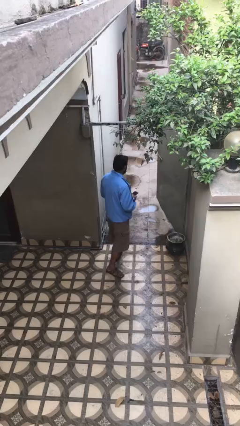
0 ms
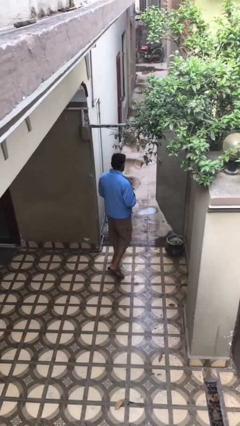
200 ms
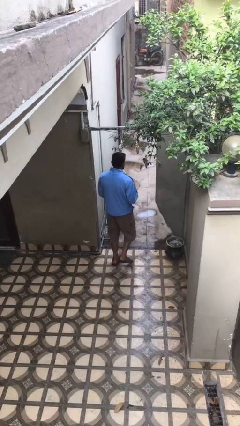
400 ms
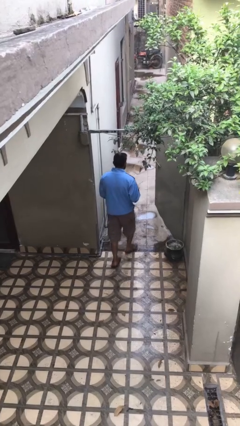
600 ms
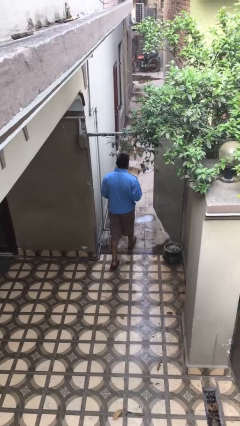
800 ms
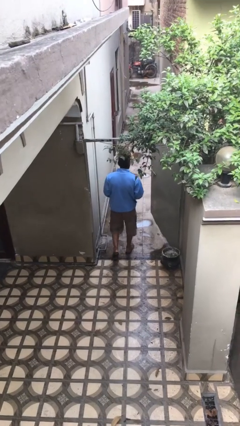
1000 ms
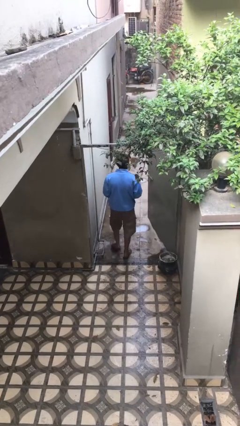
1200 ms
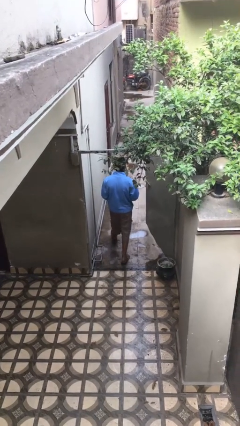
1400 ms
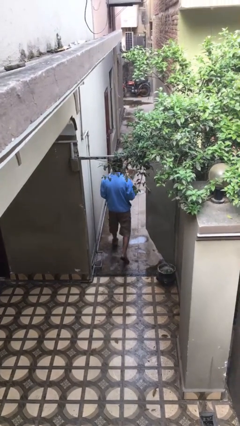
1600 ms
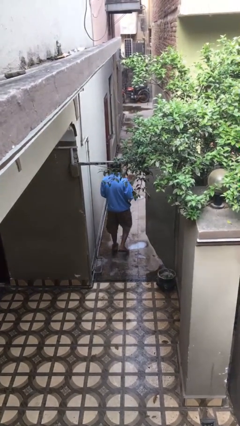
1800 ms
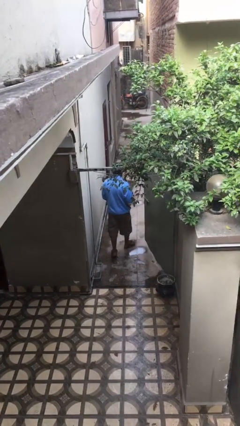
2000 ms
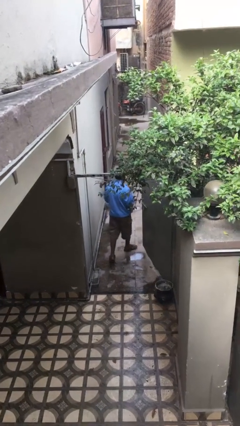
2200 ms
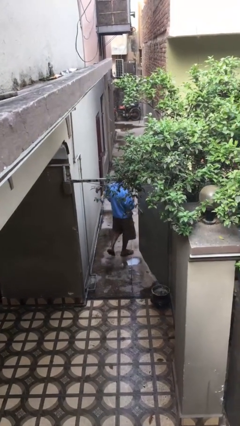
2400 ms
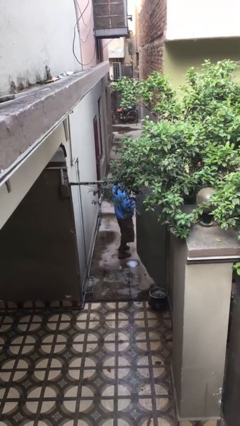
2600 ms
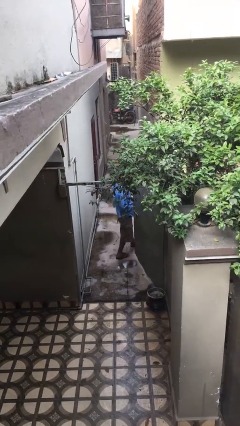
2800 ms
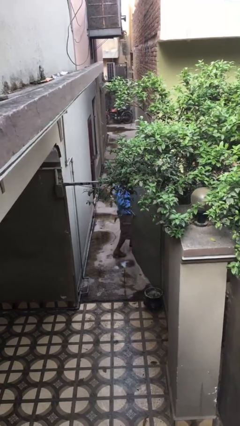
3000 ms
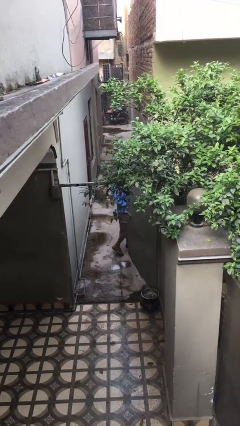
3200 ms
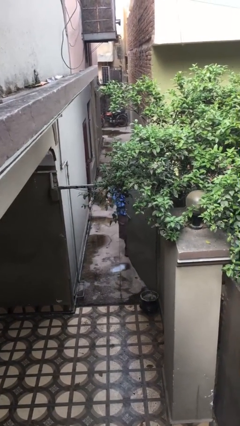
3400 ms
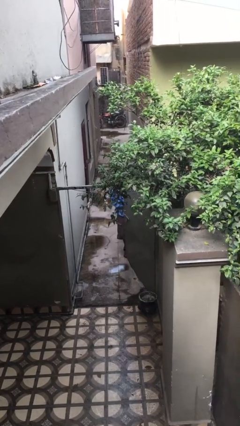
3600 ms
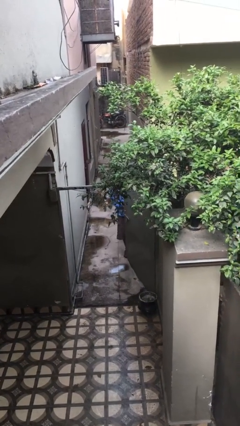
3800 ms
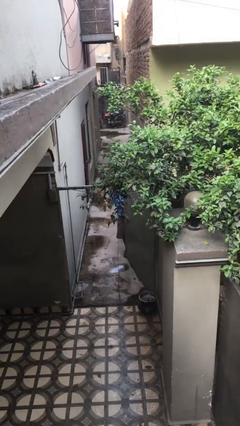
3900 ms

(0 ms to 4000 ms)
person exits scene through structure

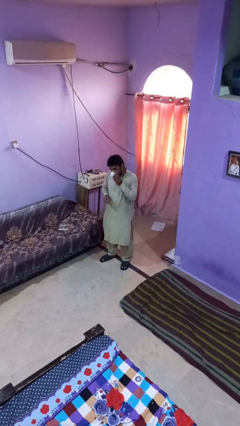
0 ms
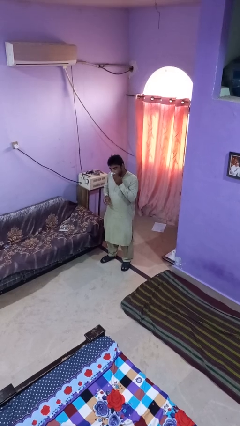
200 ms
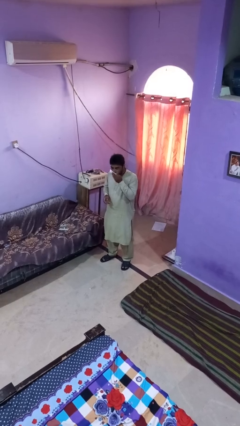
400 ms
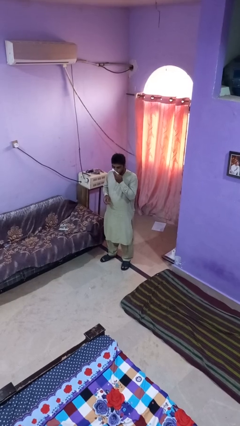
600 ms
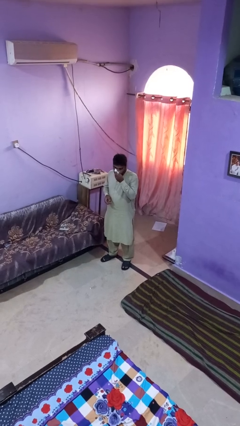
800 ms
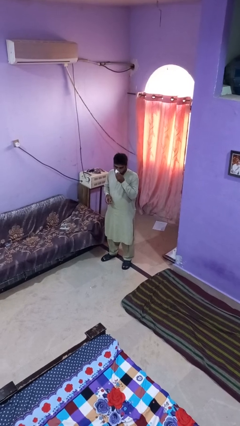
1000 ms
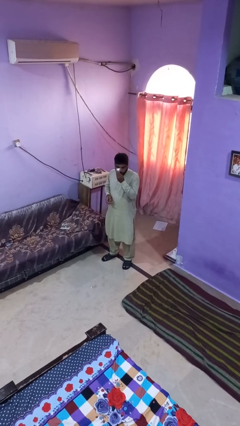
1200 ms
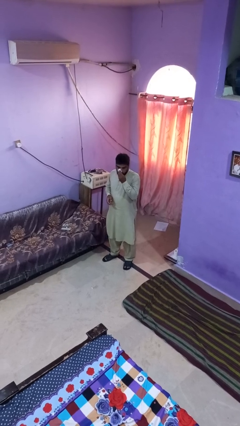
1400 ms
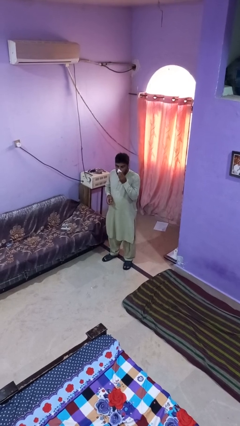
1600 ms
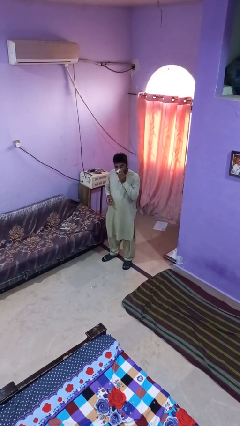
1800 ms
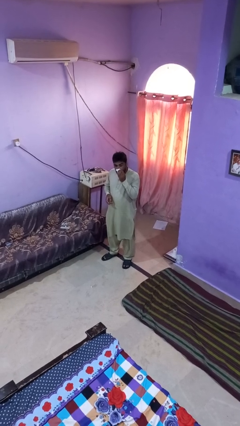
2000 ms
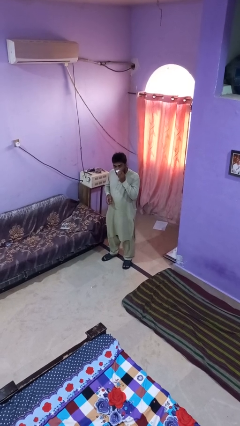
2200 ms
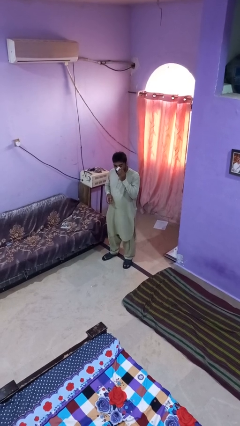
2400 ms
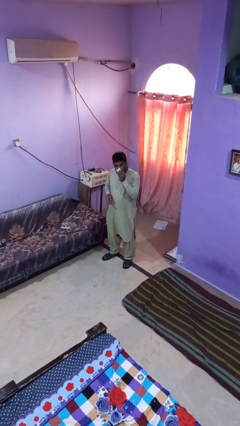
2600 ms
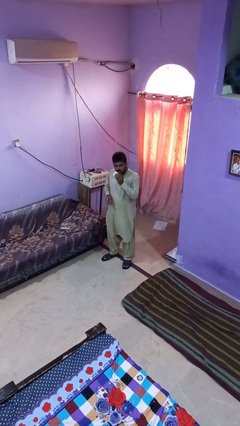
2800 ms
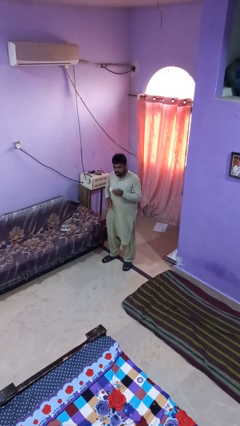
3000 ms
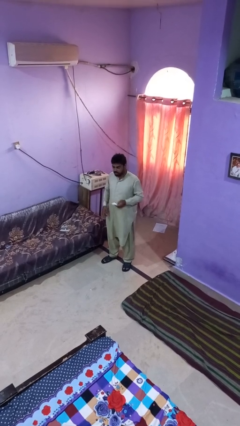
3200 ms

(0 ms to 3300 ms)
person blows nose

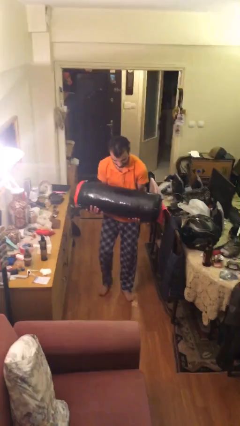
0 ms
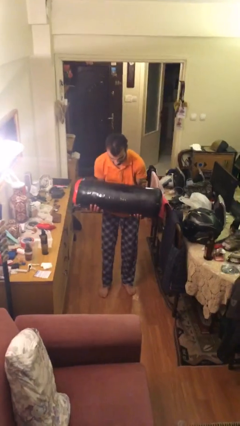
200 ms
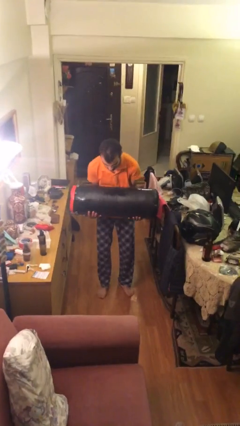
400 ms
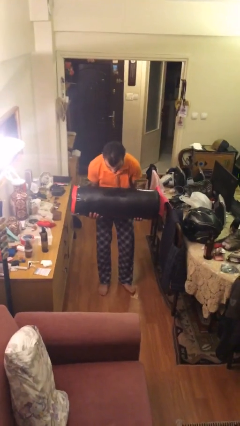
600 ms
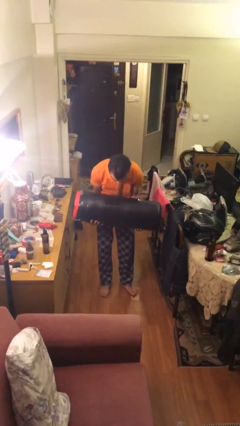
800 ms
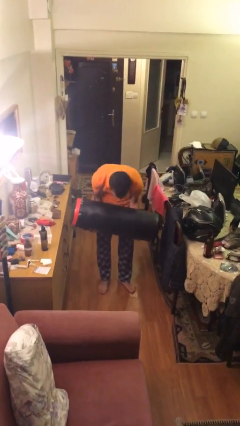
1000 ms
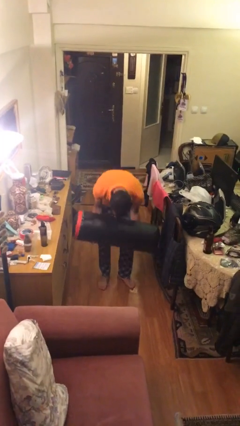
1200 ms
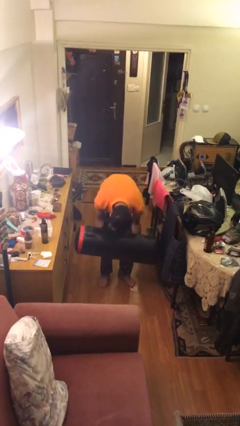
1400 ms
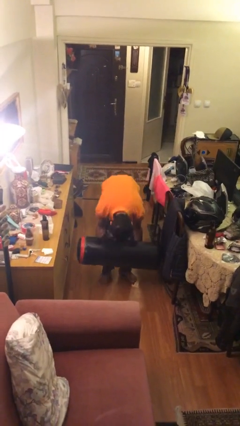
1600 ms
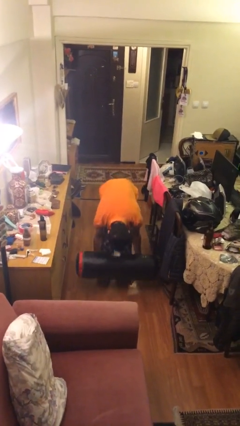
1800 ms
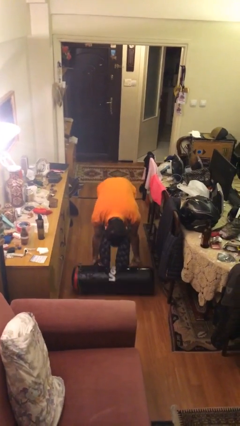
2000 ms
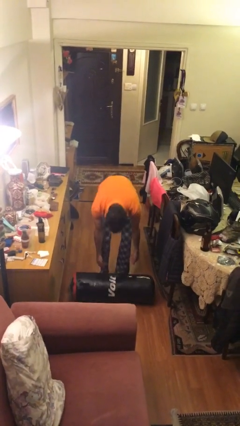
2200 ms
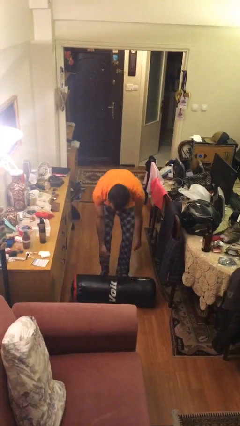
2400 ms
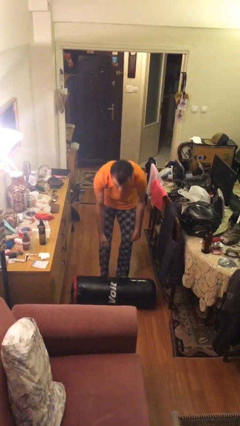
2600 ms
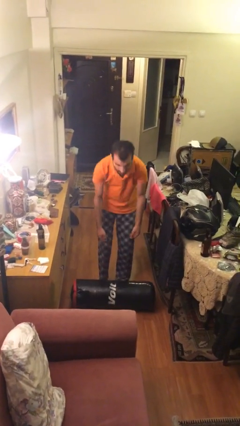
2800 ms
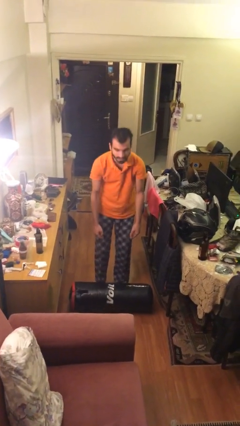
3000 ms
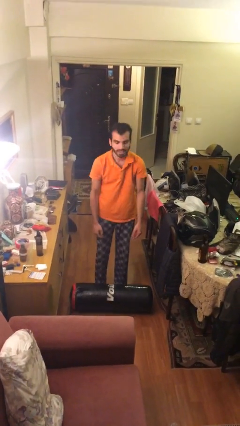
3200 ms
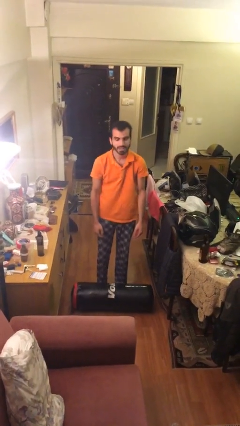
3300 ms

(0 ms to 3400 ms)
person puts down object on floor

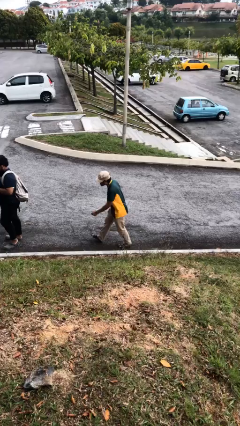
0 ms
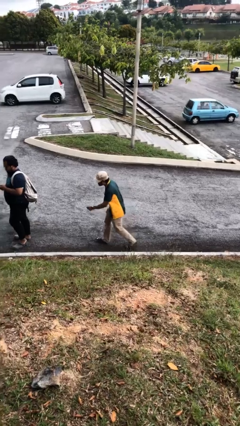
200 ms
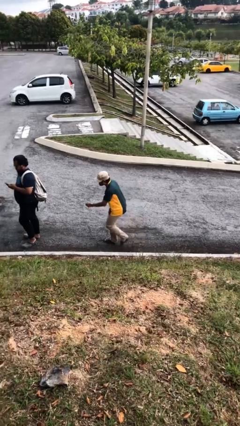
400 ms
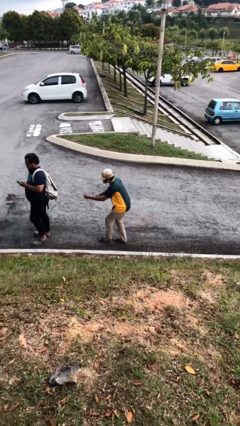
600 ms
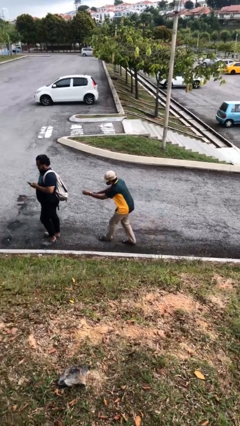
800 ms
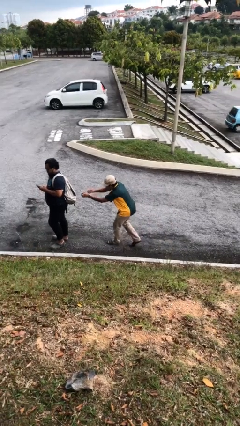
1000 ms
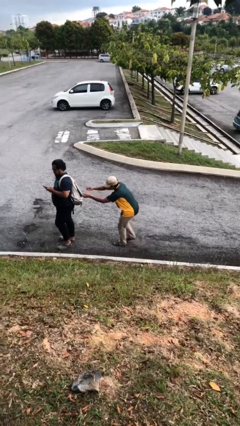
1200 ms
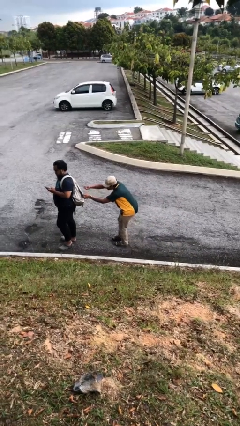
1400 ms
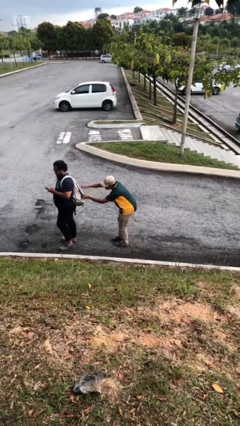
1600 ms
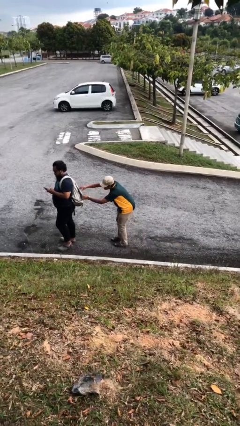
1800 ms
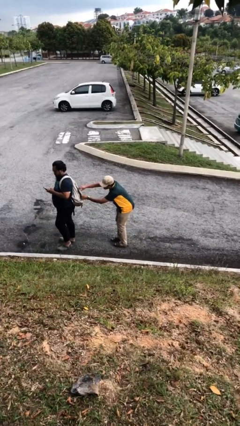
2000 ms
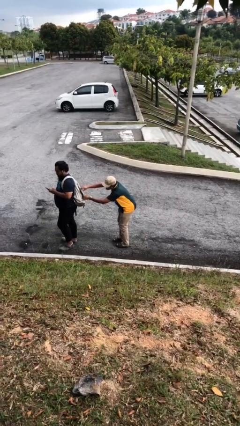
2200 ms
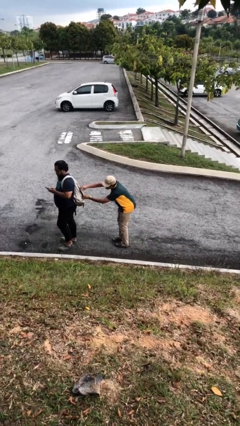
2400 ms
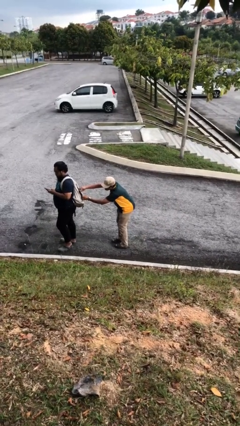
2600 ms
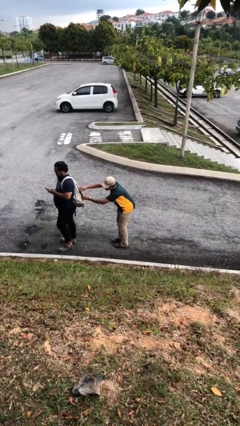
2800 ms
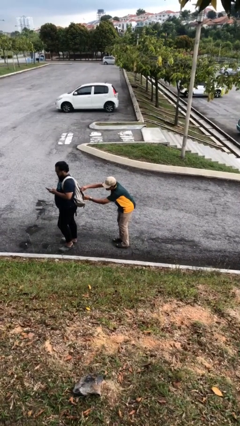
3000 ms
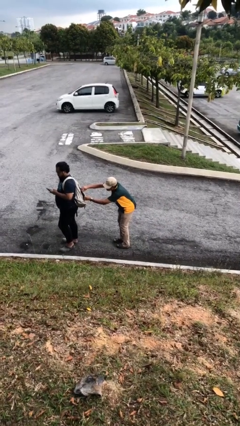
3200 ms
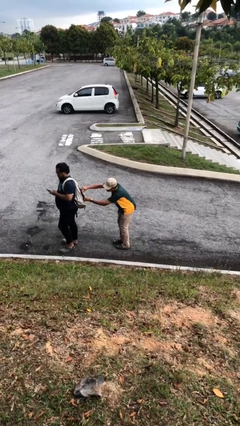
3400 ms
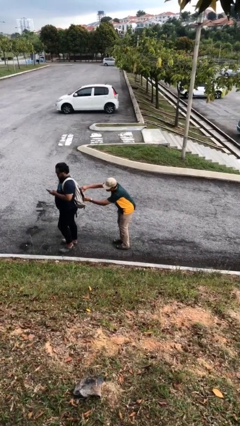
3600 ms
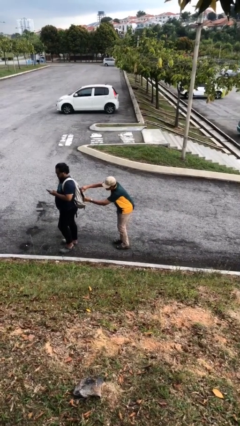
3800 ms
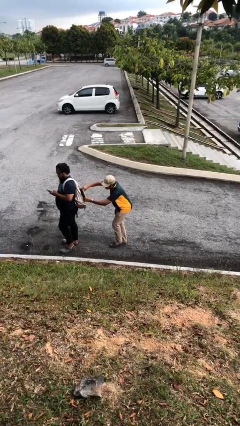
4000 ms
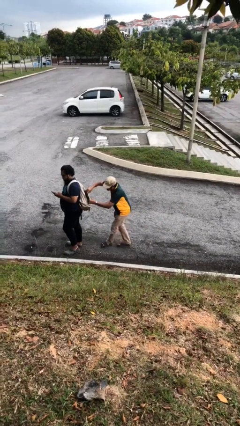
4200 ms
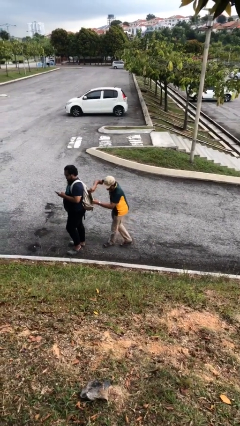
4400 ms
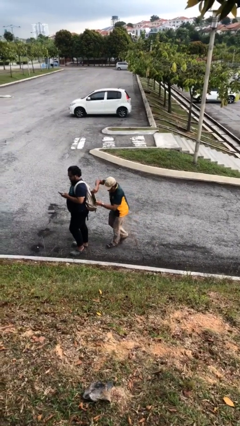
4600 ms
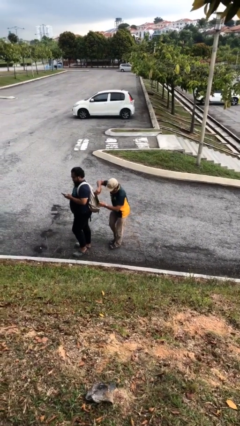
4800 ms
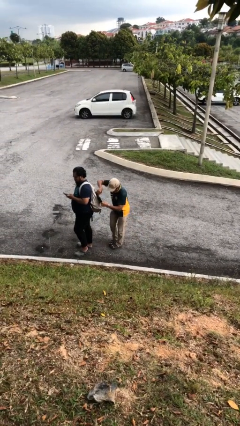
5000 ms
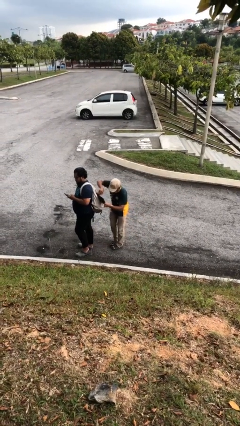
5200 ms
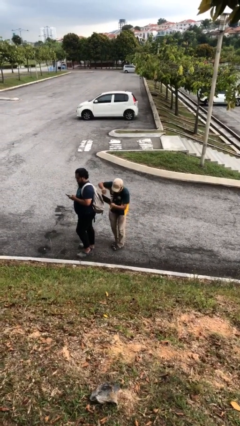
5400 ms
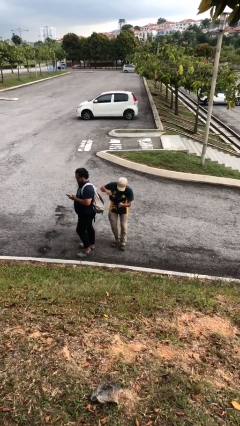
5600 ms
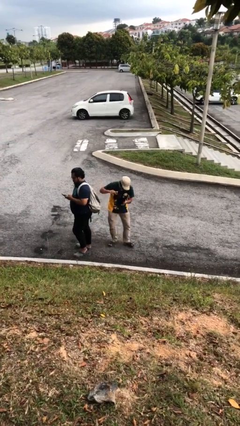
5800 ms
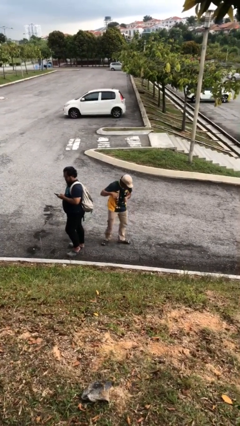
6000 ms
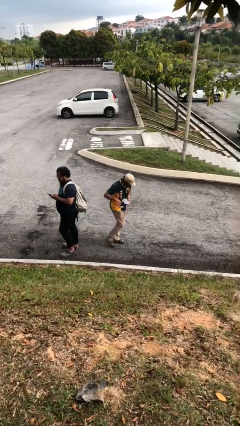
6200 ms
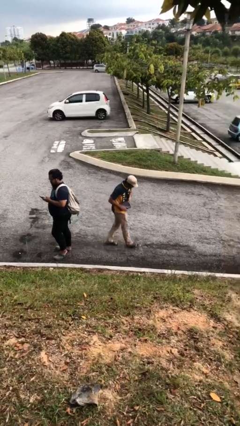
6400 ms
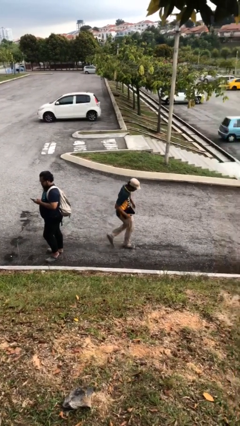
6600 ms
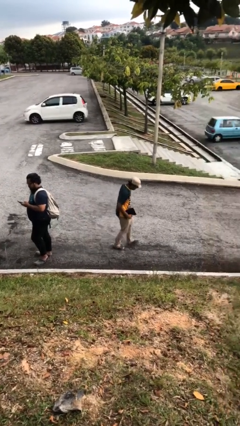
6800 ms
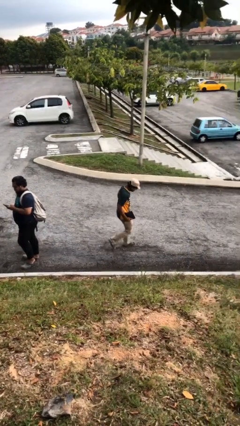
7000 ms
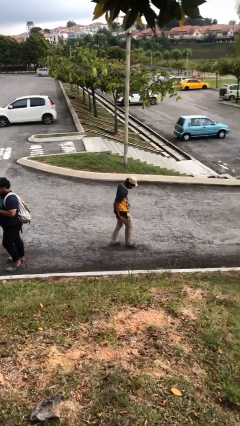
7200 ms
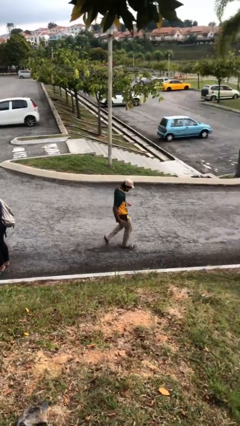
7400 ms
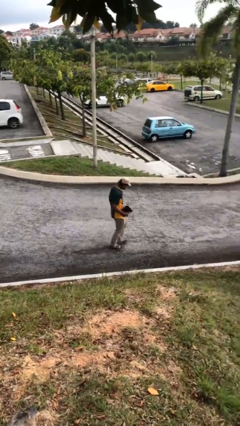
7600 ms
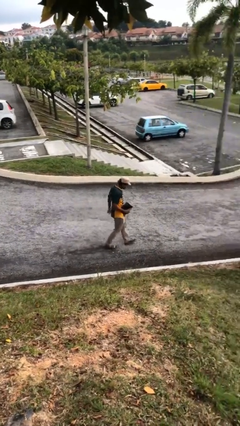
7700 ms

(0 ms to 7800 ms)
person steals object from person
